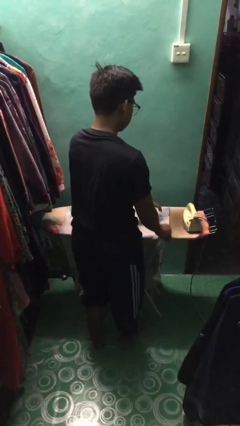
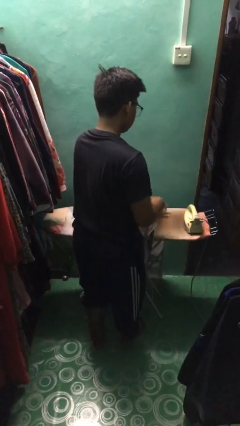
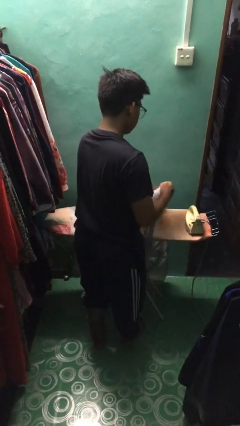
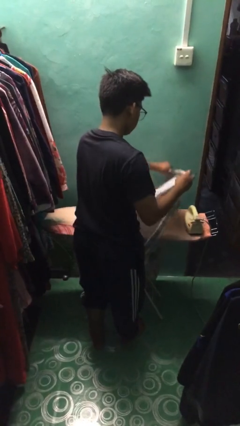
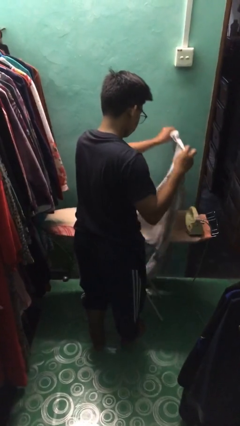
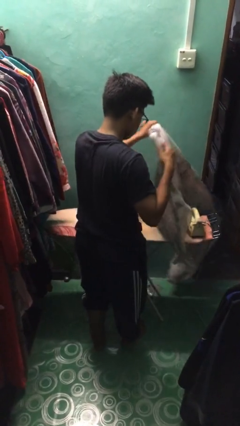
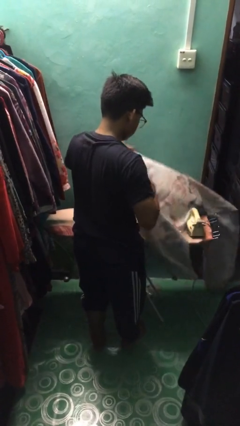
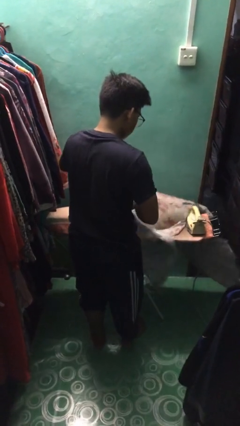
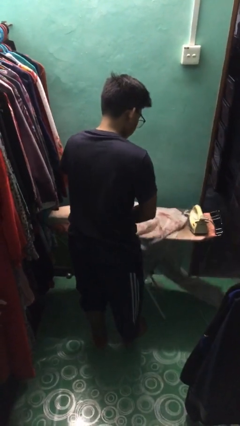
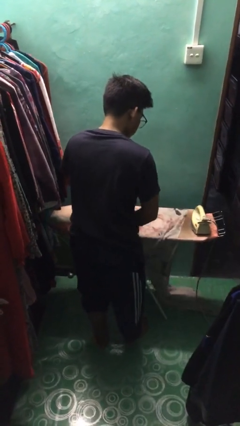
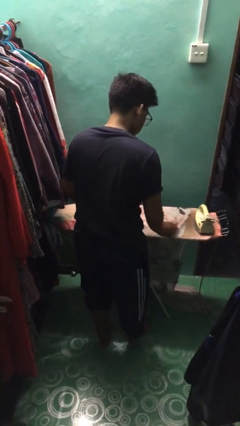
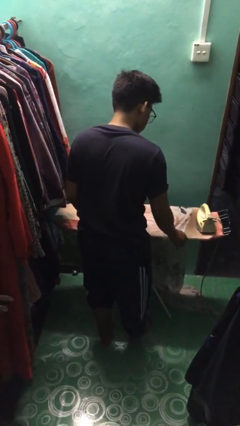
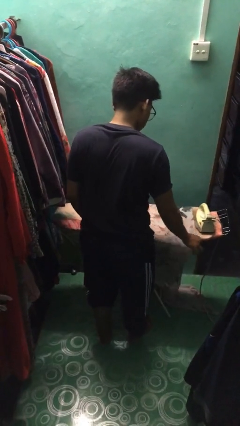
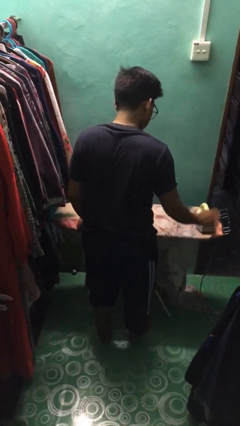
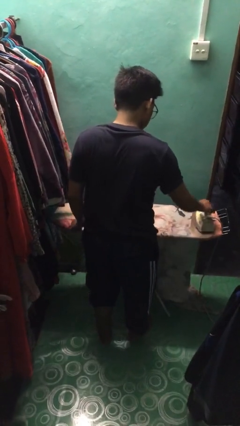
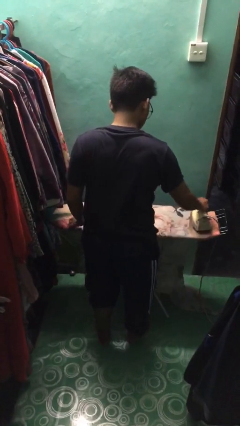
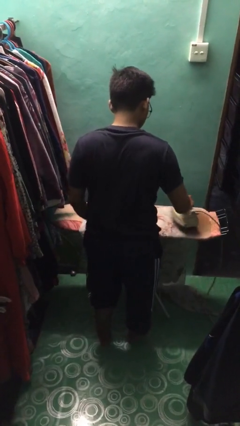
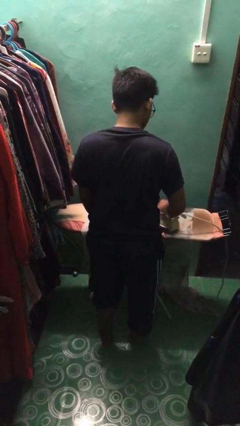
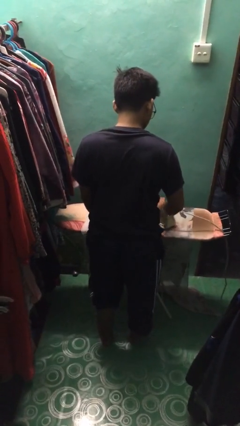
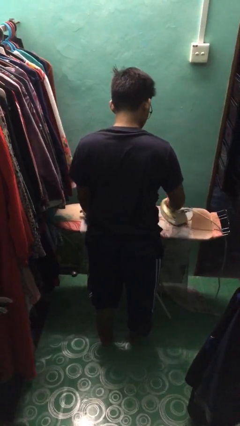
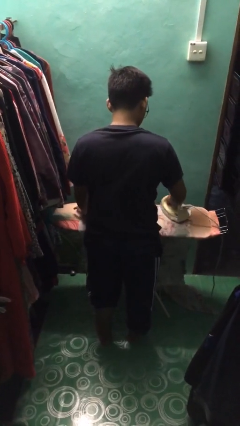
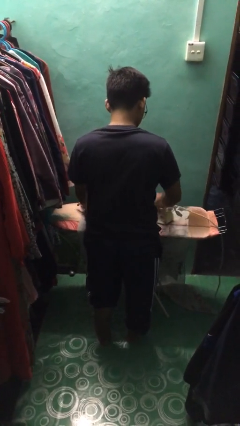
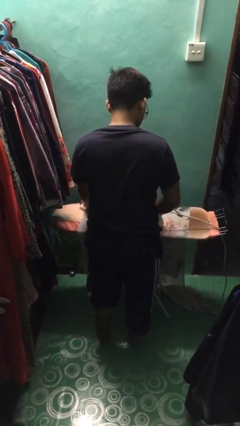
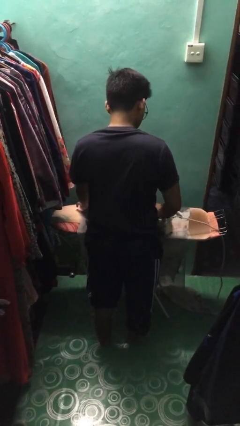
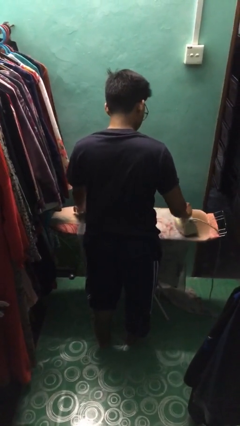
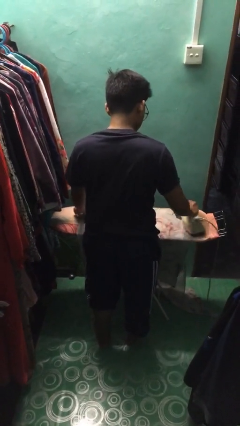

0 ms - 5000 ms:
person irons clothes

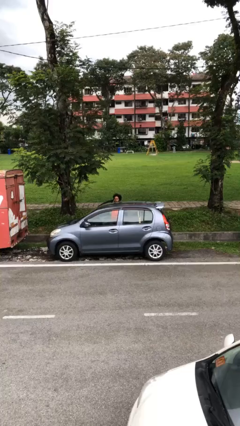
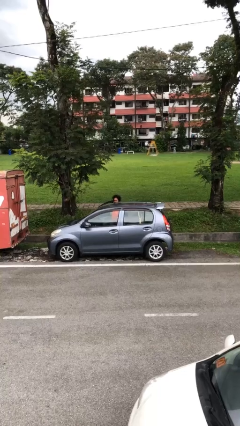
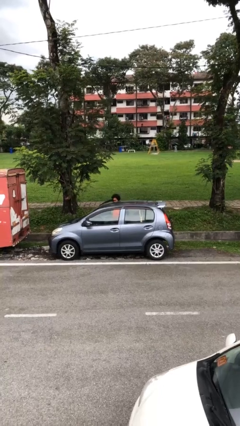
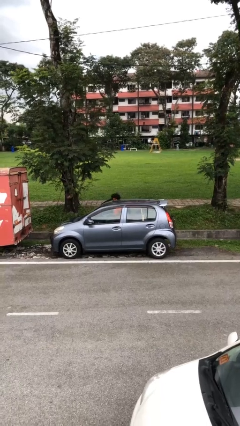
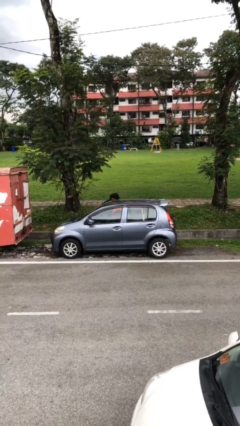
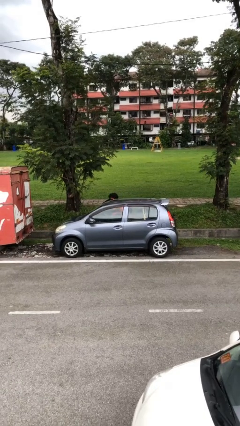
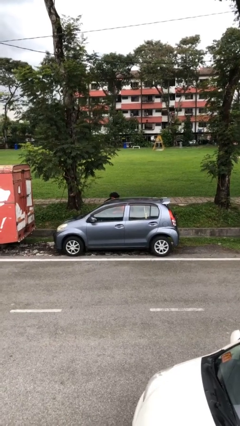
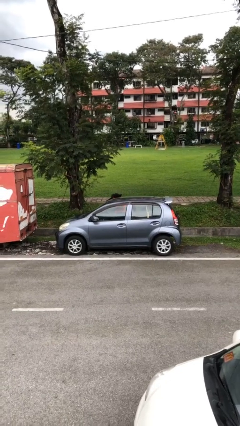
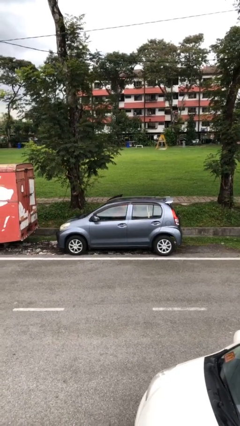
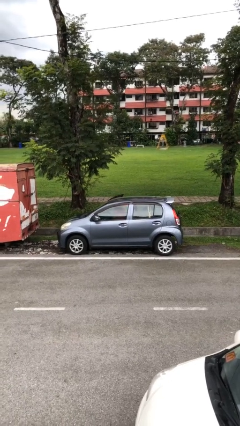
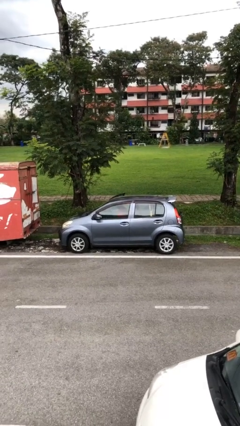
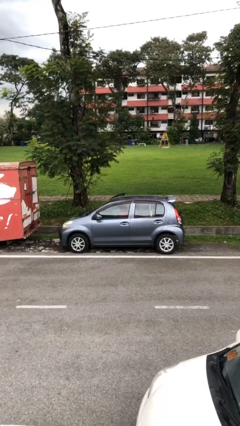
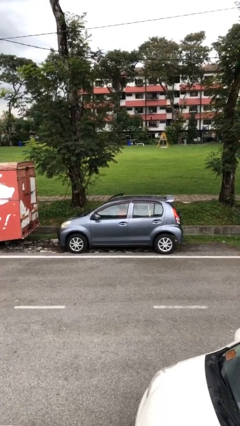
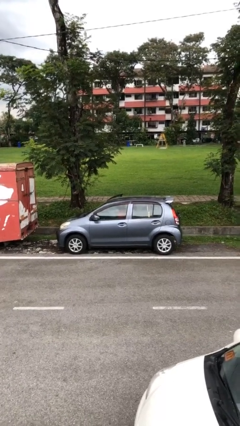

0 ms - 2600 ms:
person enters car

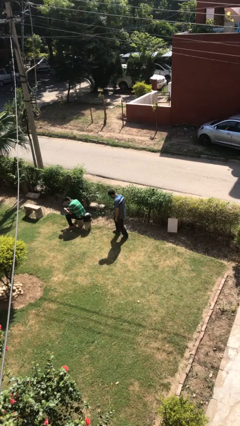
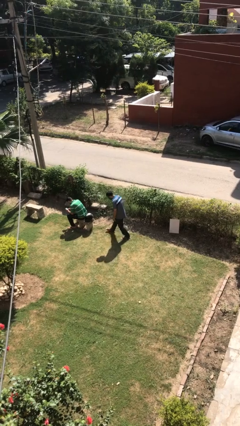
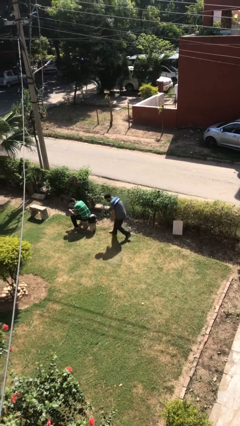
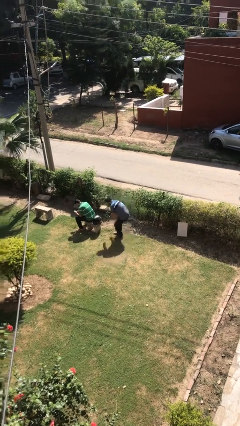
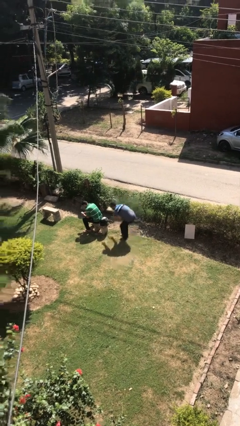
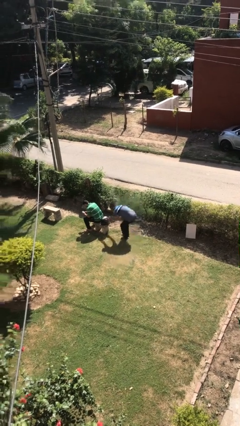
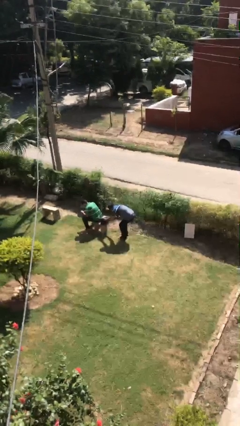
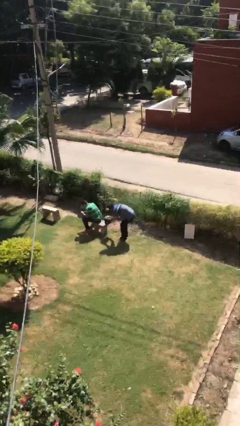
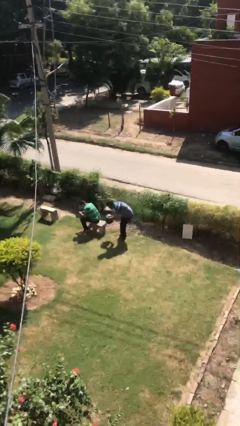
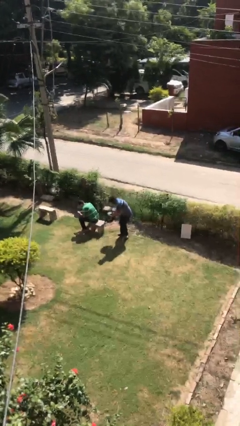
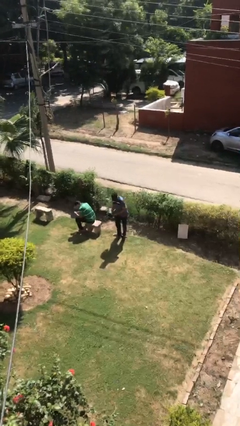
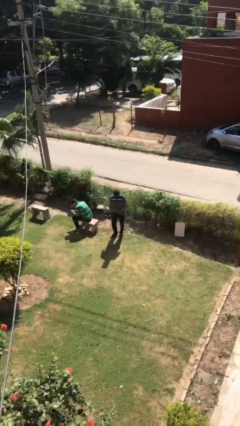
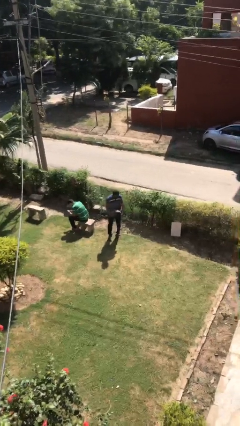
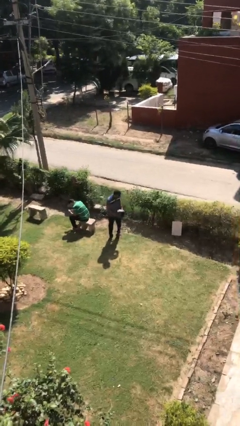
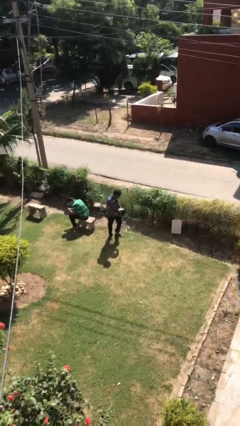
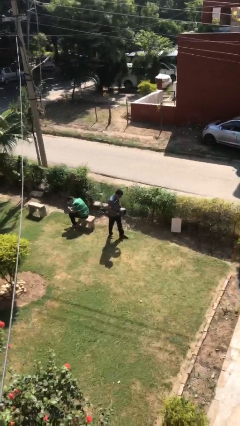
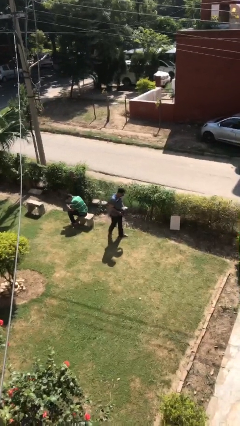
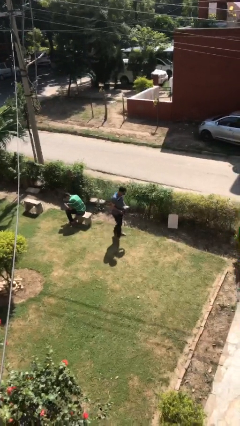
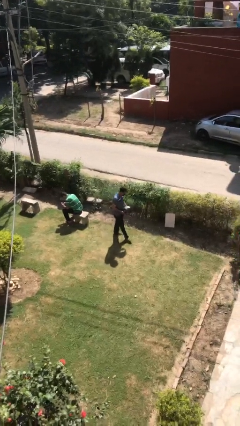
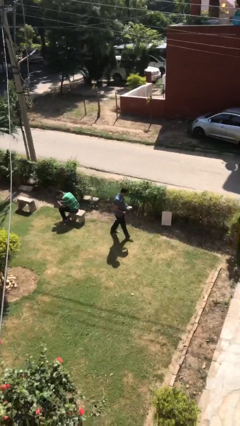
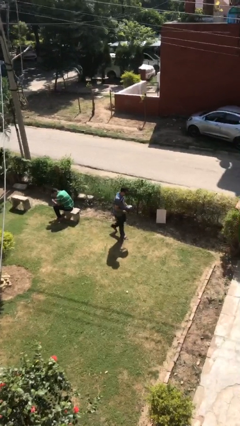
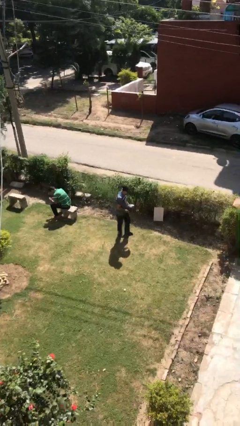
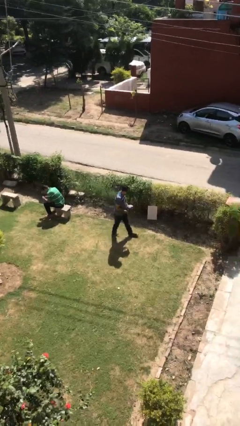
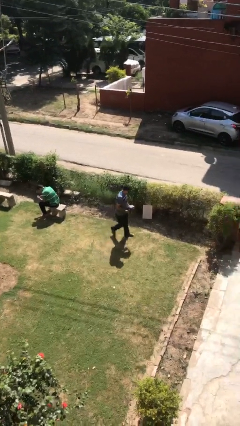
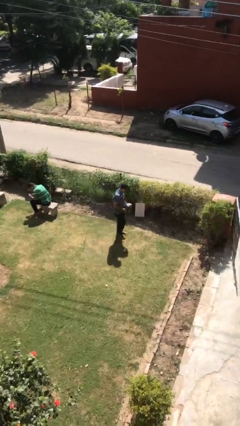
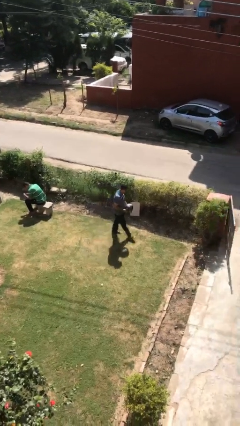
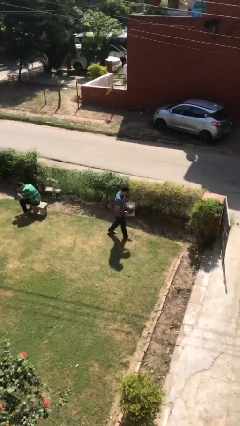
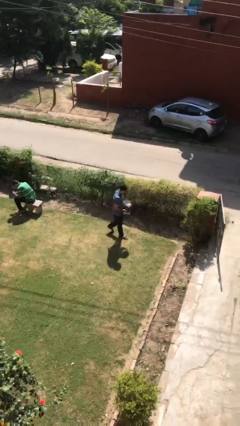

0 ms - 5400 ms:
person steals object from person

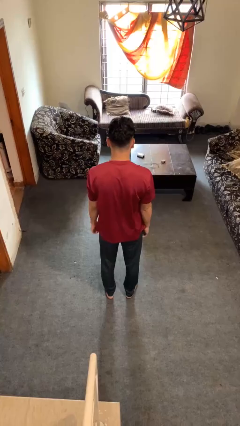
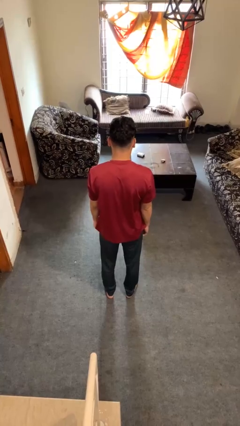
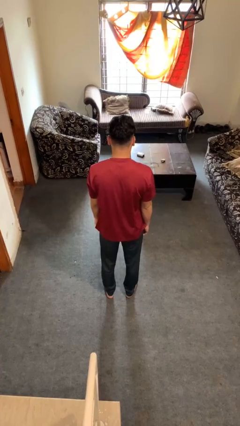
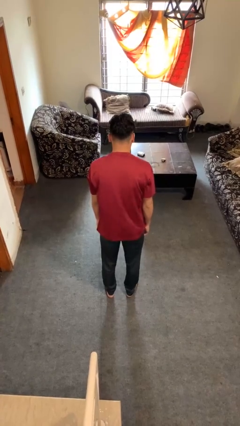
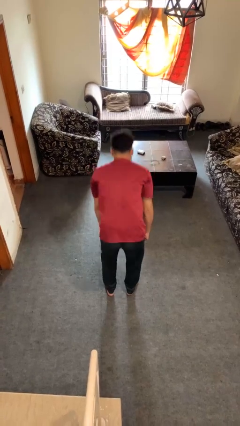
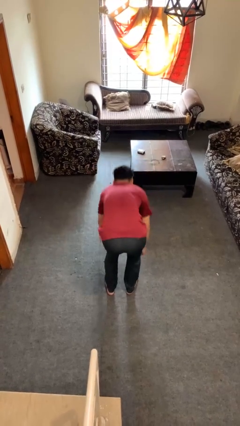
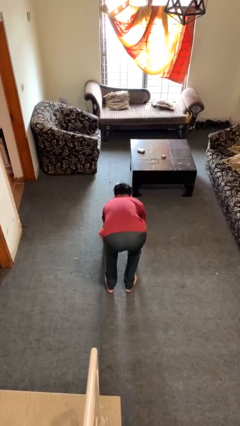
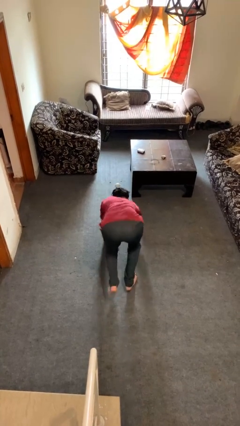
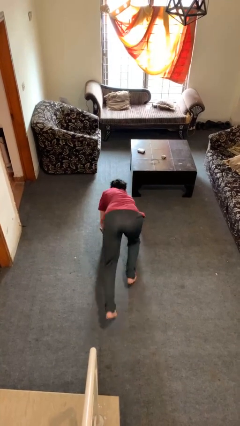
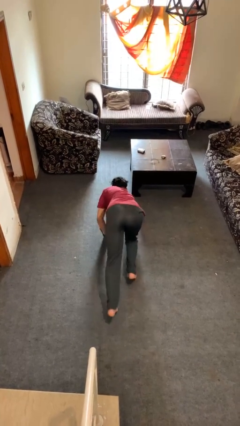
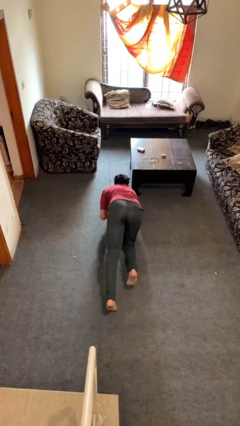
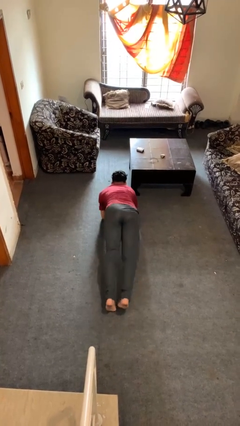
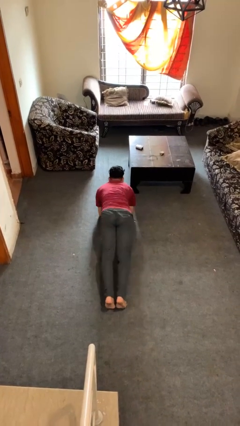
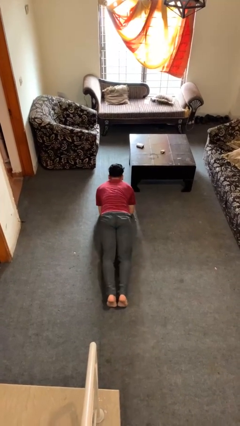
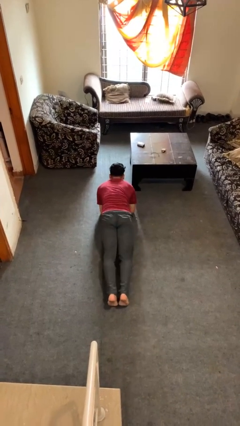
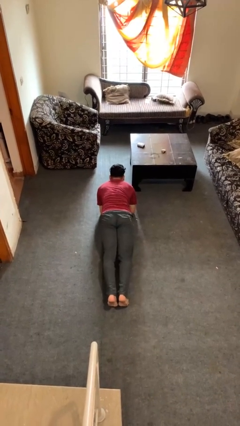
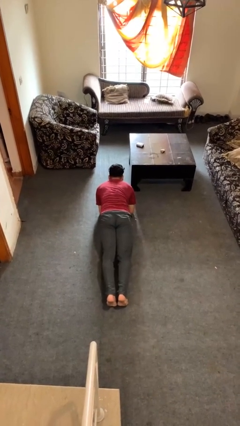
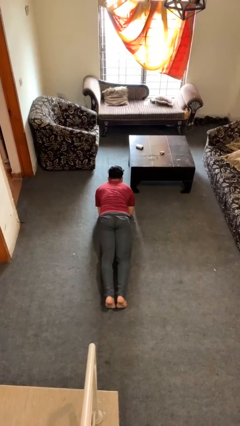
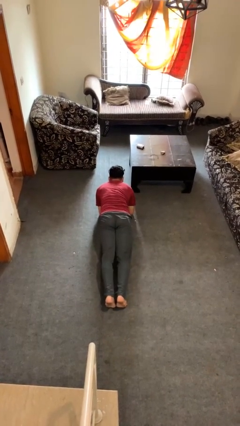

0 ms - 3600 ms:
person exercises with plank

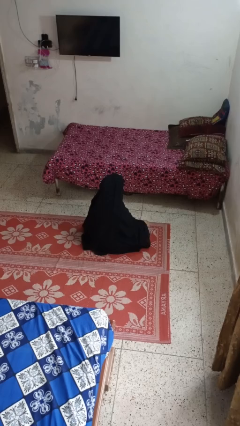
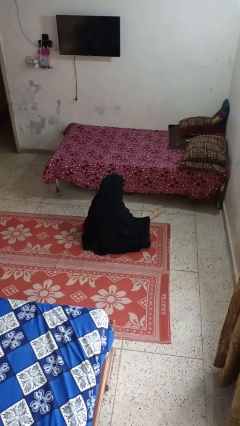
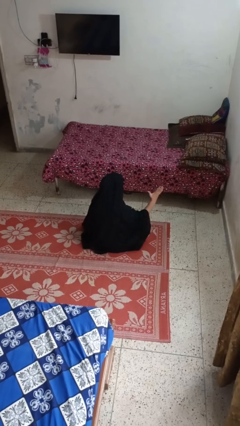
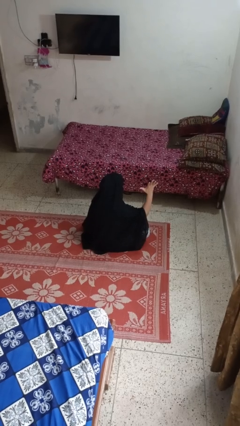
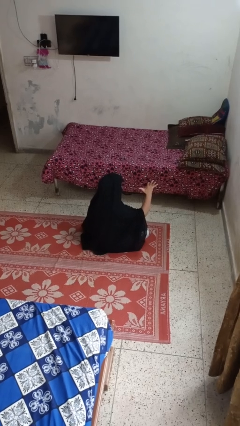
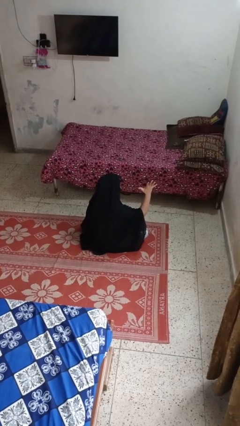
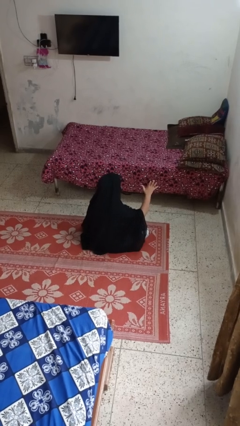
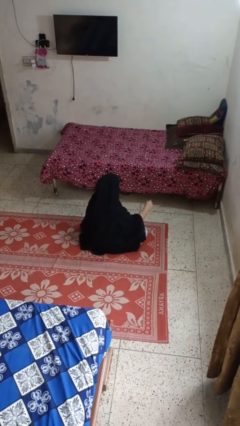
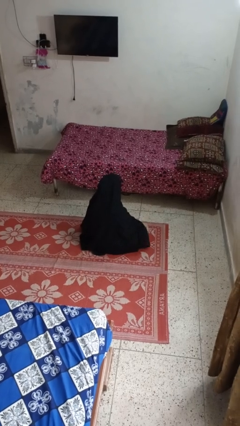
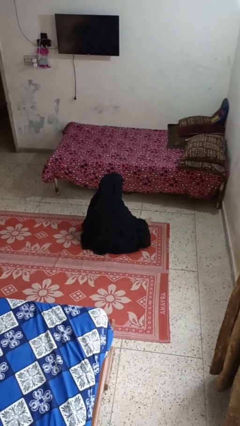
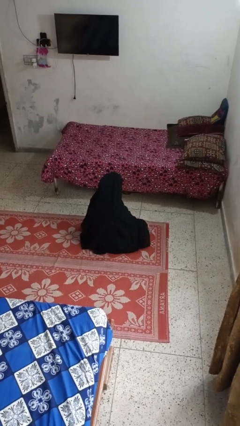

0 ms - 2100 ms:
person gestures number five
